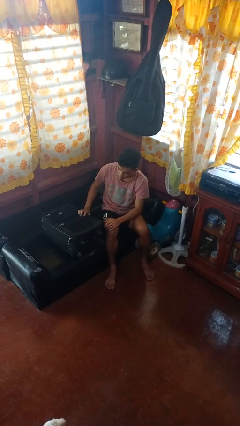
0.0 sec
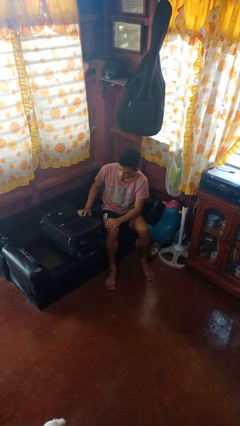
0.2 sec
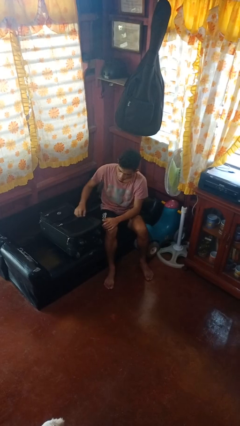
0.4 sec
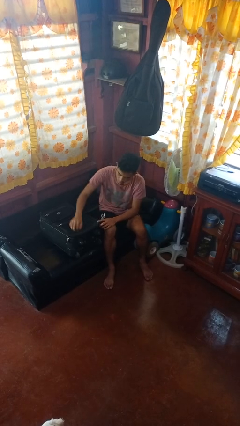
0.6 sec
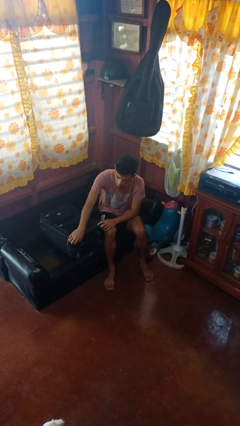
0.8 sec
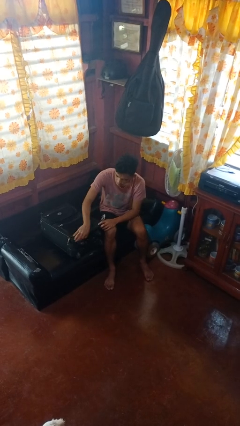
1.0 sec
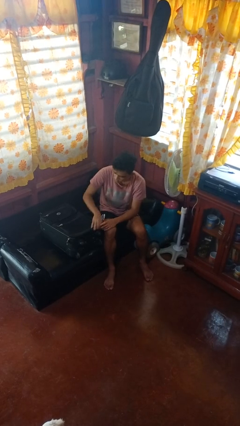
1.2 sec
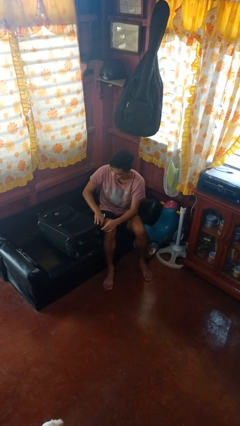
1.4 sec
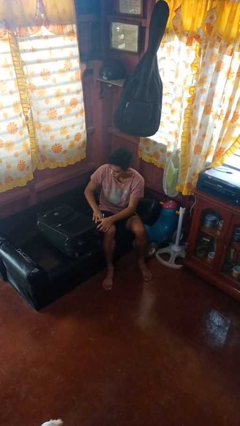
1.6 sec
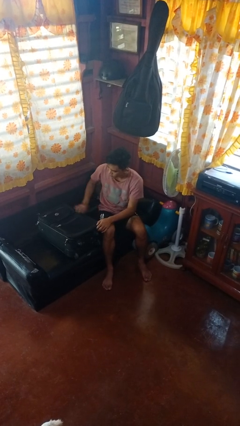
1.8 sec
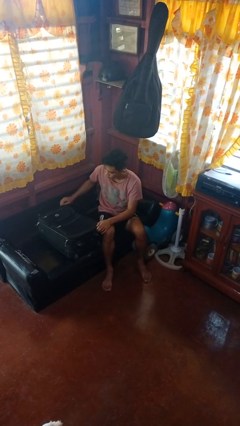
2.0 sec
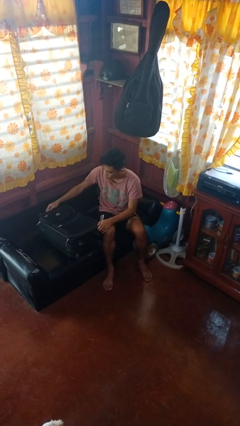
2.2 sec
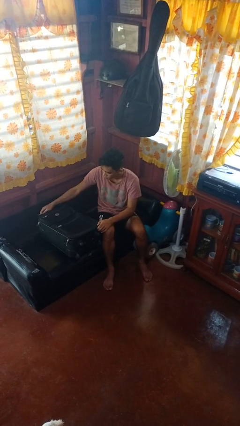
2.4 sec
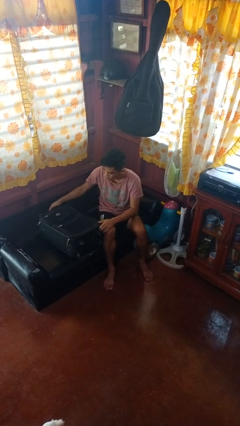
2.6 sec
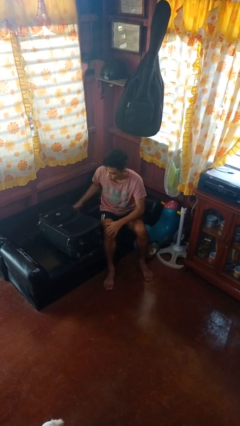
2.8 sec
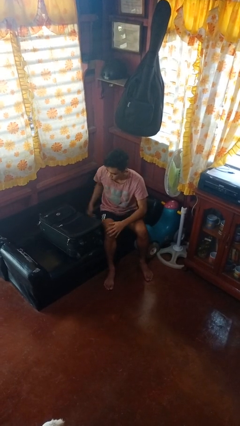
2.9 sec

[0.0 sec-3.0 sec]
person closes suitcase

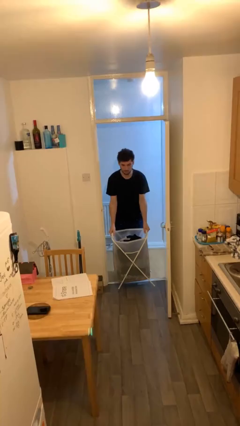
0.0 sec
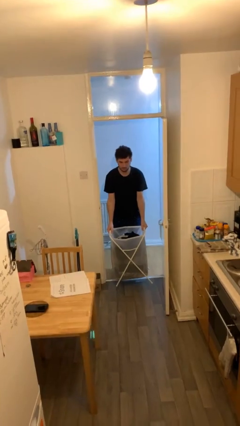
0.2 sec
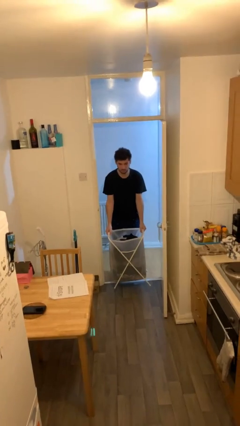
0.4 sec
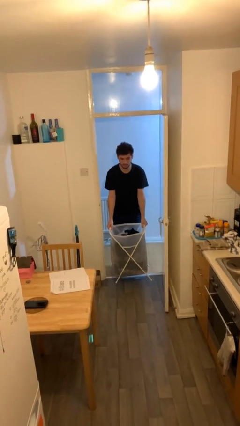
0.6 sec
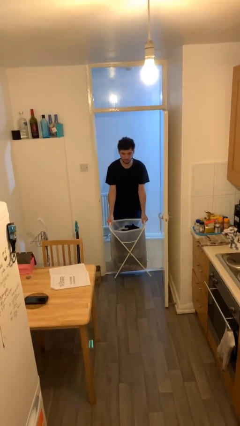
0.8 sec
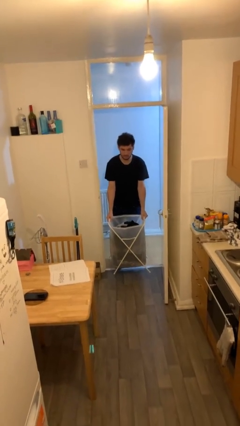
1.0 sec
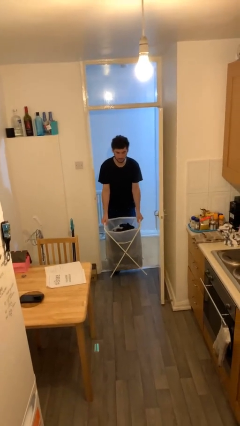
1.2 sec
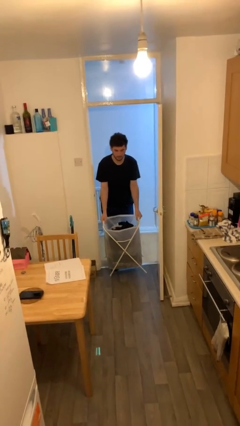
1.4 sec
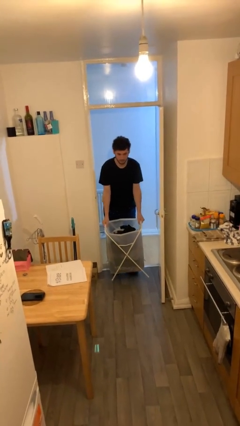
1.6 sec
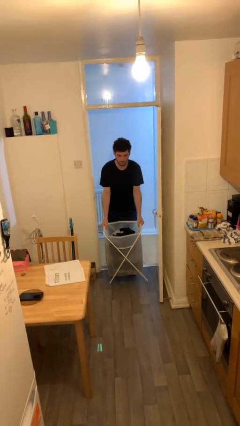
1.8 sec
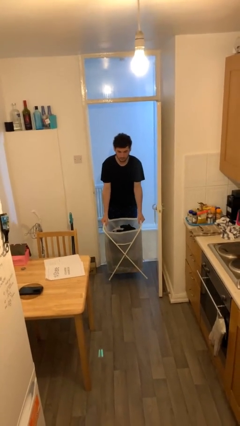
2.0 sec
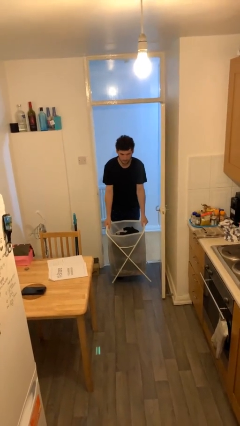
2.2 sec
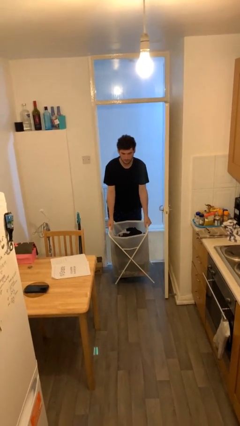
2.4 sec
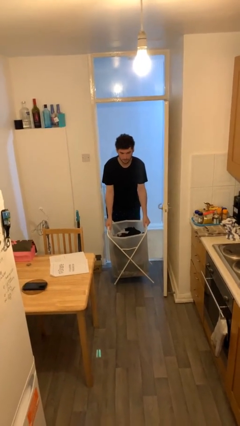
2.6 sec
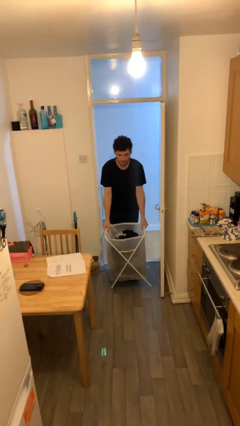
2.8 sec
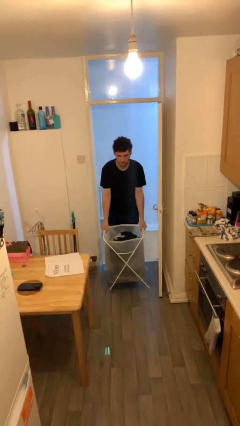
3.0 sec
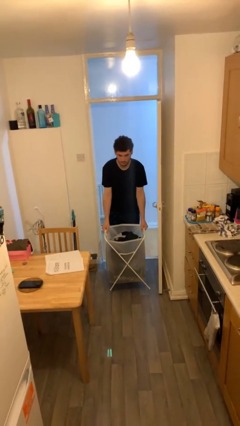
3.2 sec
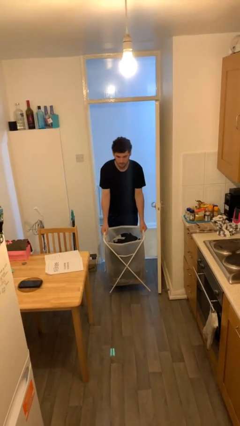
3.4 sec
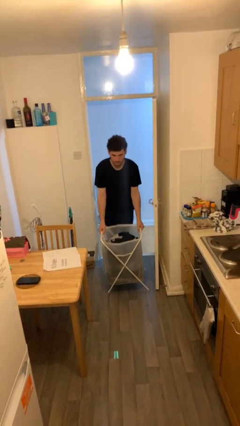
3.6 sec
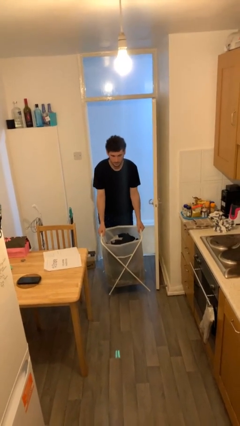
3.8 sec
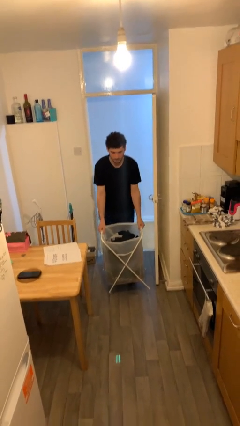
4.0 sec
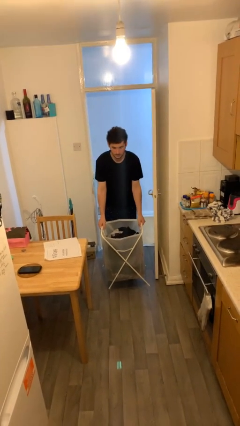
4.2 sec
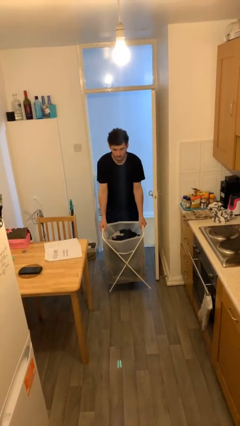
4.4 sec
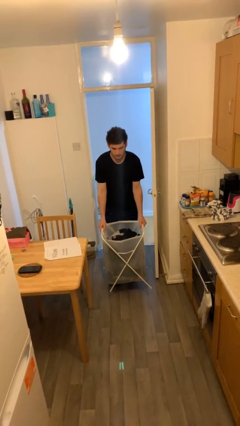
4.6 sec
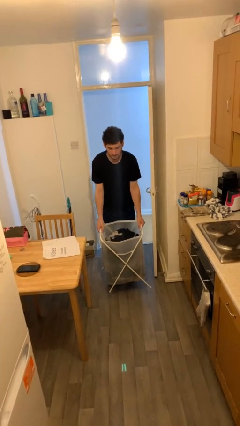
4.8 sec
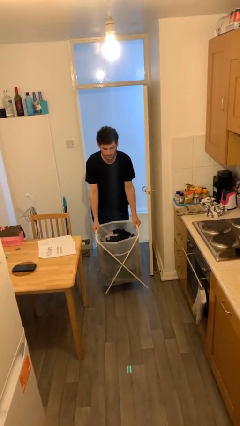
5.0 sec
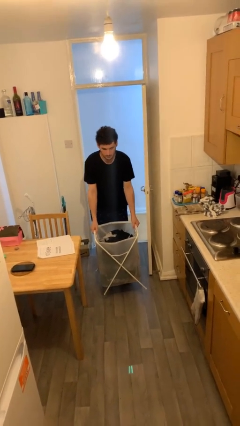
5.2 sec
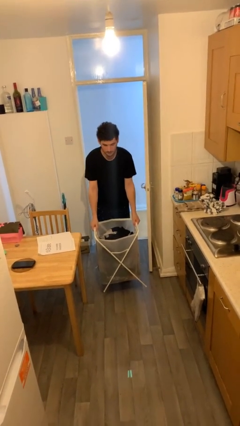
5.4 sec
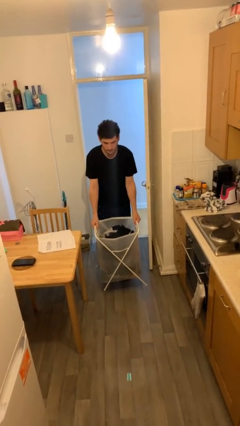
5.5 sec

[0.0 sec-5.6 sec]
person carries heavy object

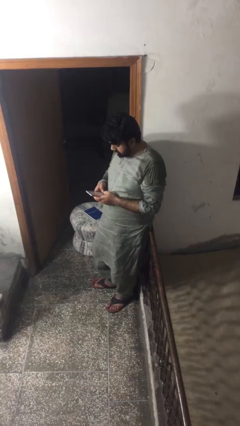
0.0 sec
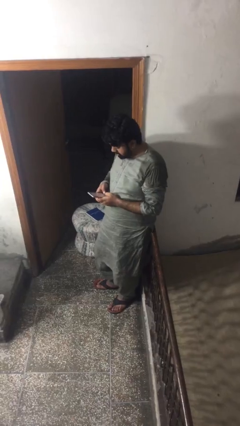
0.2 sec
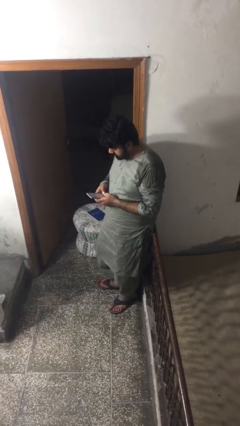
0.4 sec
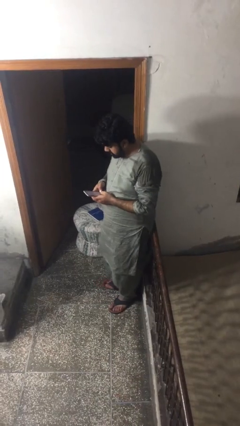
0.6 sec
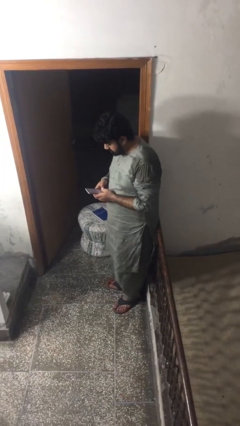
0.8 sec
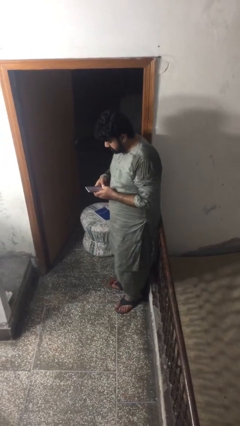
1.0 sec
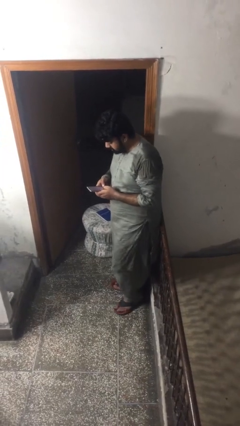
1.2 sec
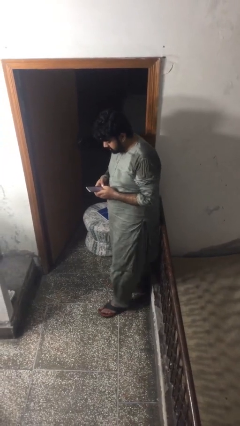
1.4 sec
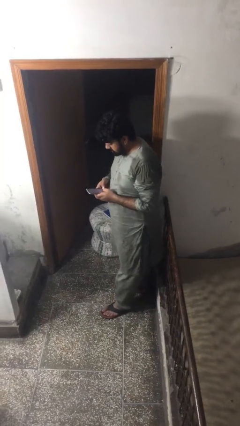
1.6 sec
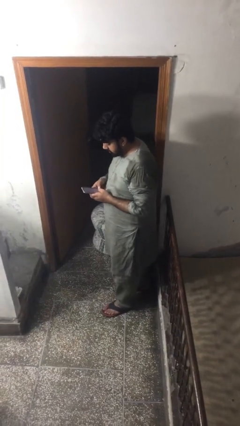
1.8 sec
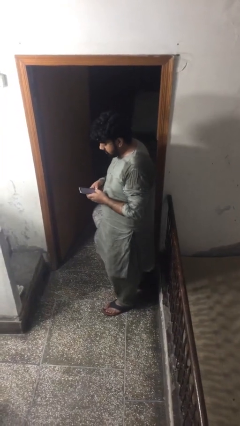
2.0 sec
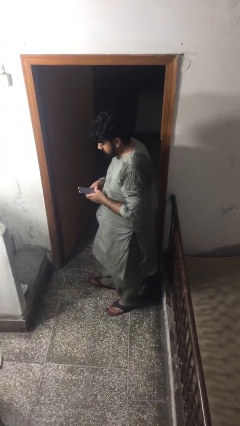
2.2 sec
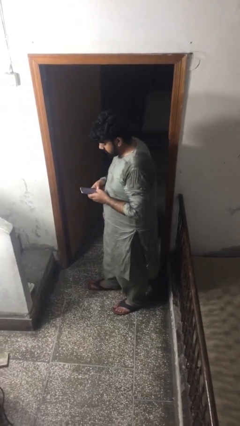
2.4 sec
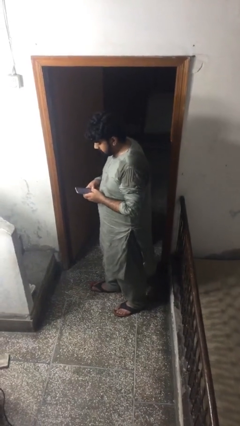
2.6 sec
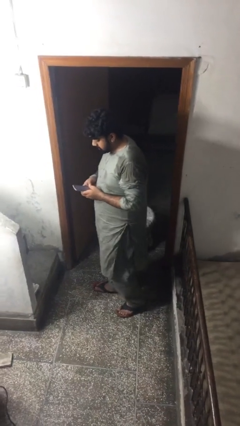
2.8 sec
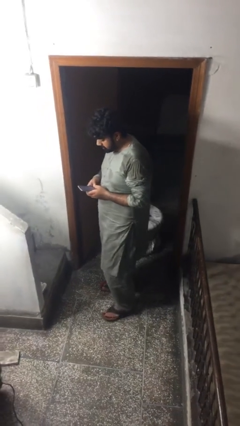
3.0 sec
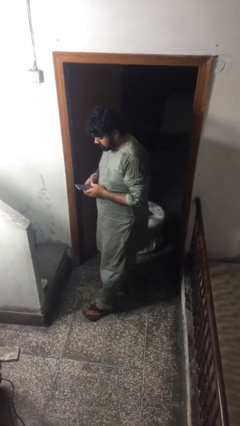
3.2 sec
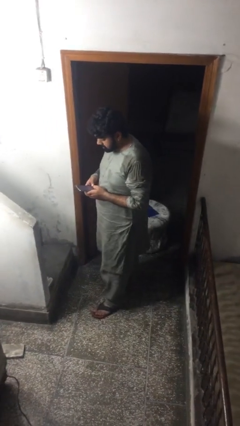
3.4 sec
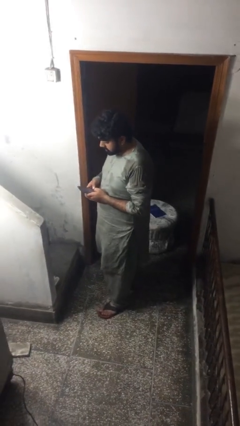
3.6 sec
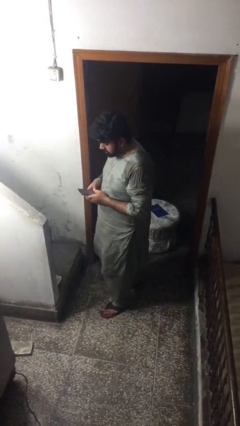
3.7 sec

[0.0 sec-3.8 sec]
person texts on phone

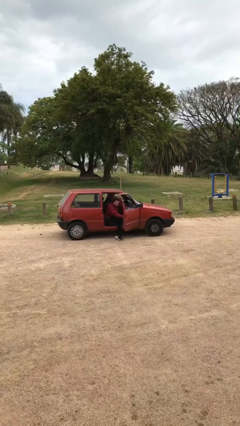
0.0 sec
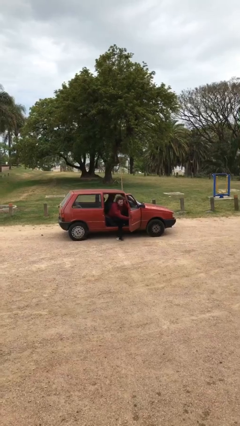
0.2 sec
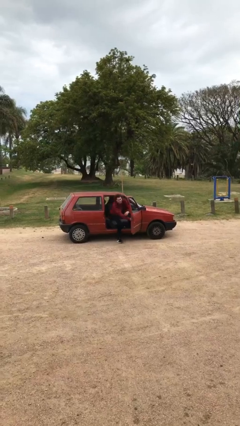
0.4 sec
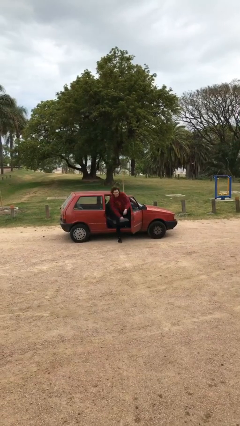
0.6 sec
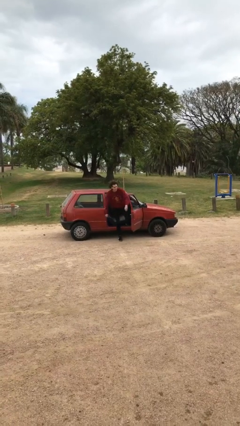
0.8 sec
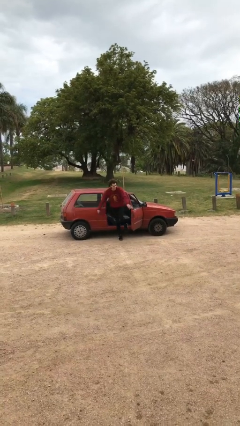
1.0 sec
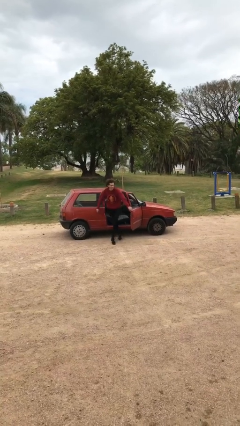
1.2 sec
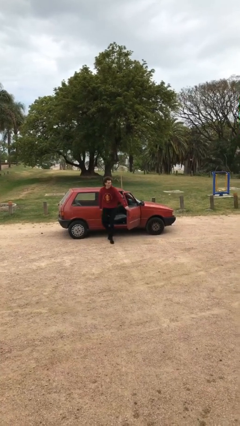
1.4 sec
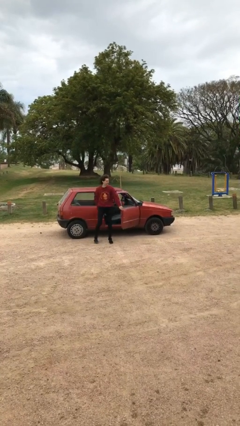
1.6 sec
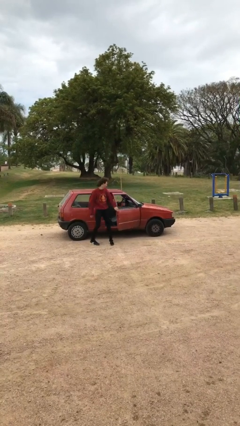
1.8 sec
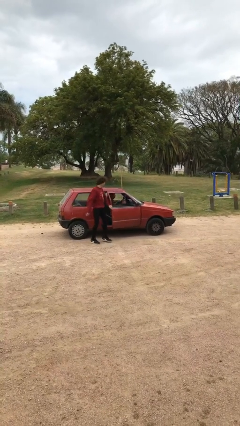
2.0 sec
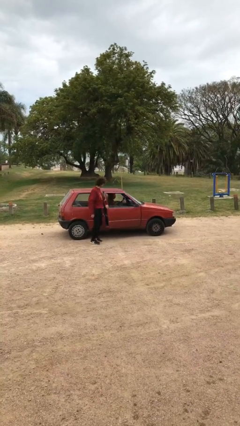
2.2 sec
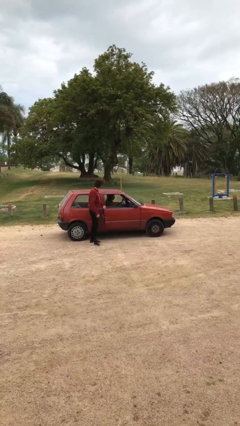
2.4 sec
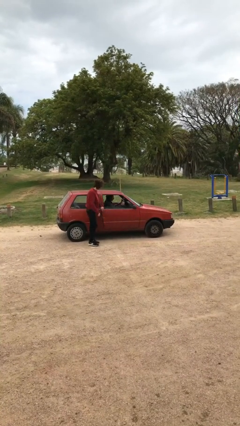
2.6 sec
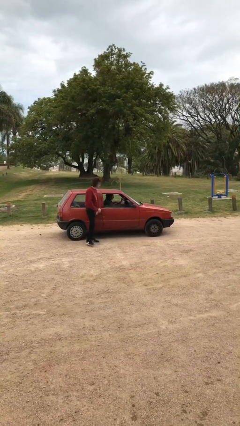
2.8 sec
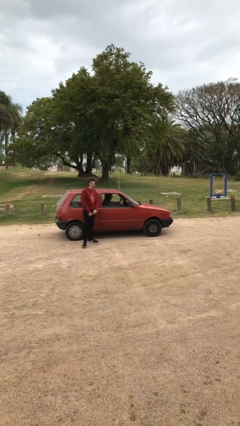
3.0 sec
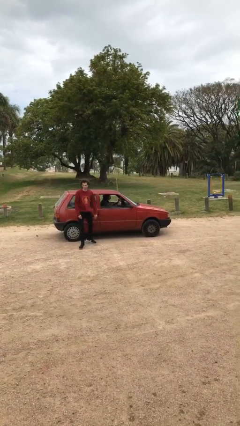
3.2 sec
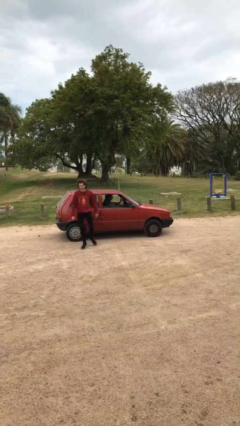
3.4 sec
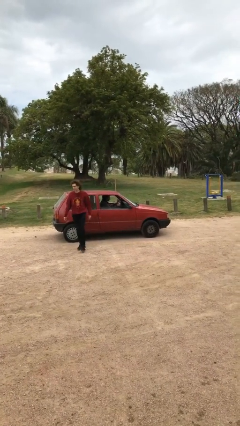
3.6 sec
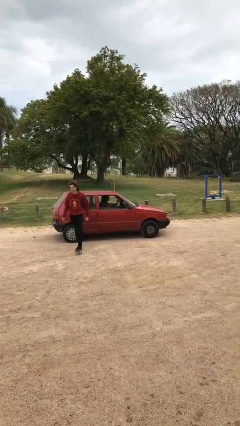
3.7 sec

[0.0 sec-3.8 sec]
car drops off person

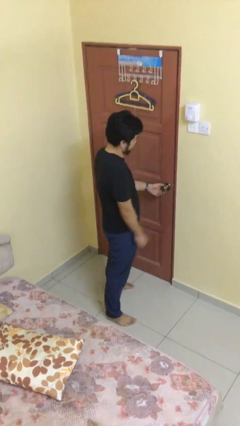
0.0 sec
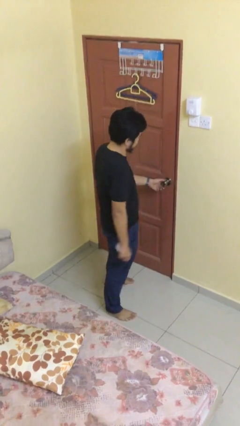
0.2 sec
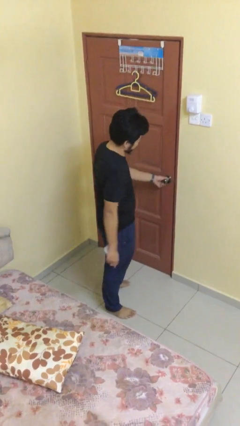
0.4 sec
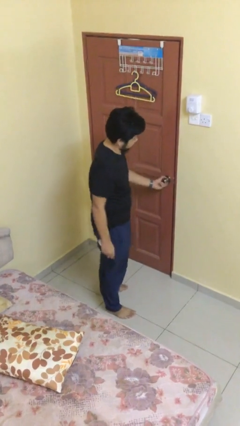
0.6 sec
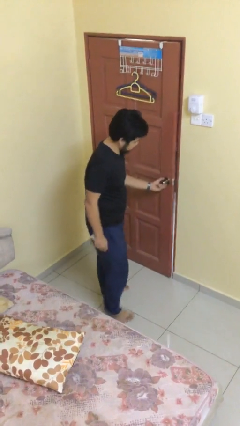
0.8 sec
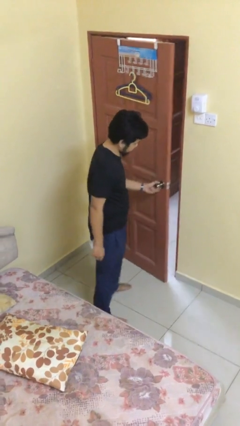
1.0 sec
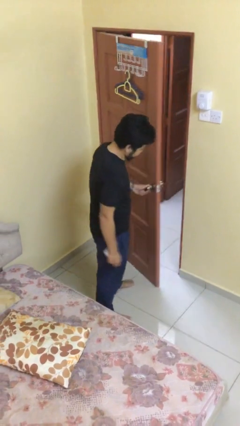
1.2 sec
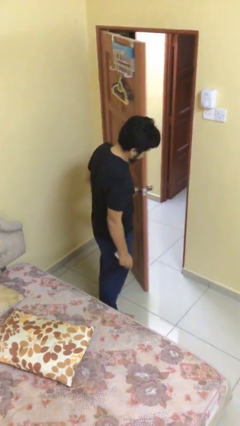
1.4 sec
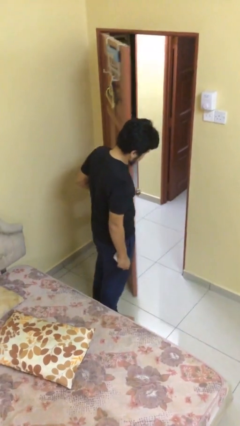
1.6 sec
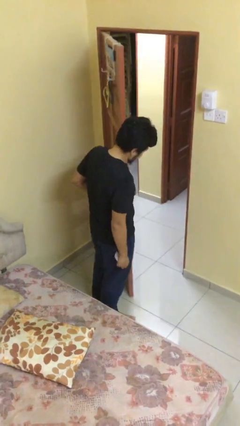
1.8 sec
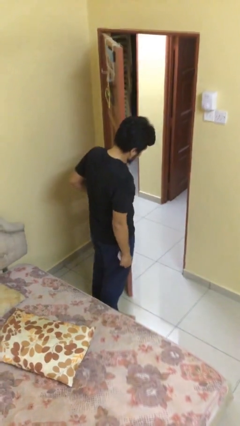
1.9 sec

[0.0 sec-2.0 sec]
person opens facility door
